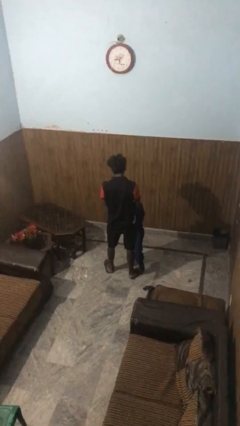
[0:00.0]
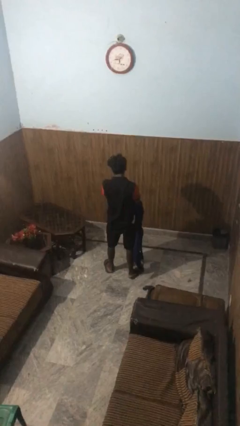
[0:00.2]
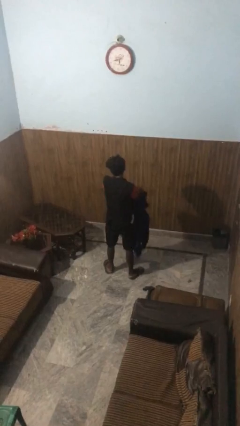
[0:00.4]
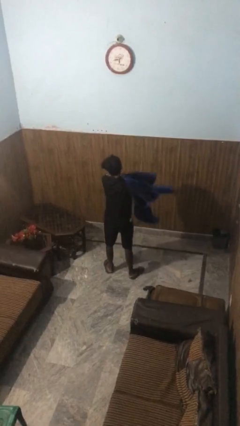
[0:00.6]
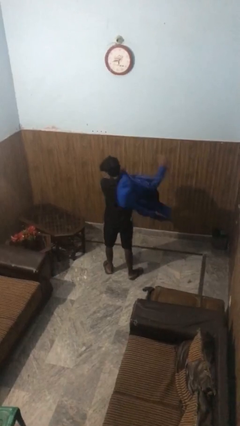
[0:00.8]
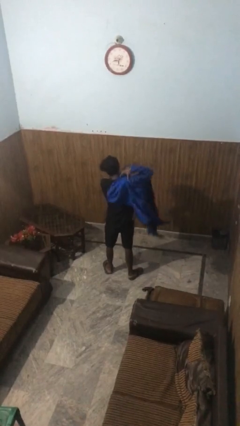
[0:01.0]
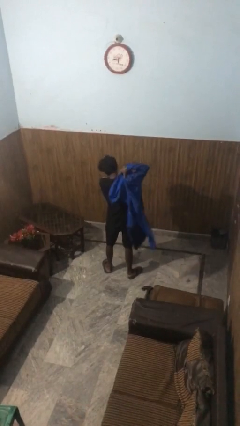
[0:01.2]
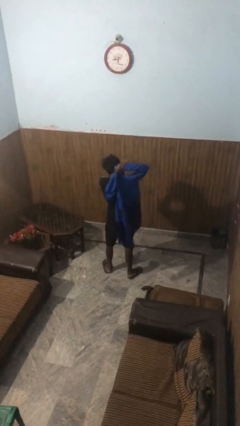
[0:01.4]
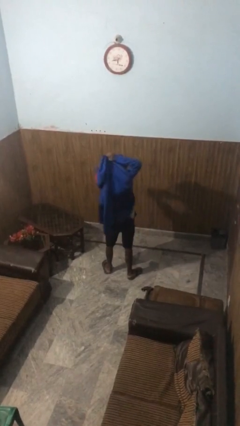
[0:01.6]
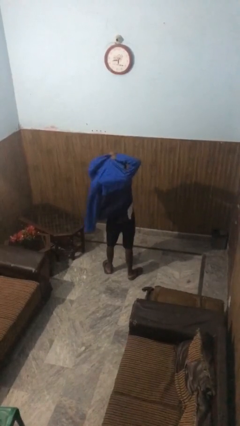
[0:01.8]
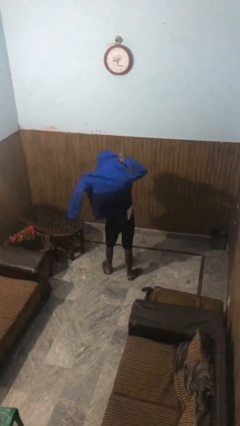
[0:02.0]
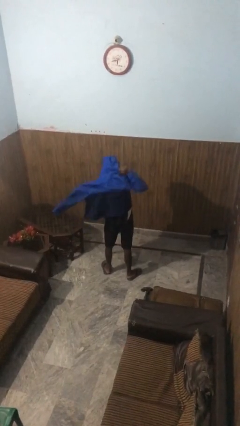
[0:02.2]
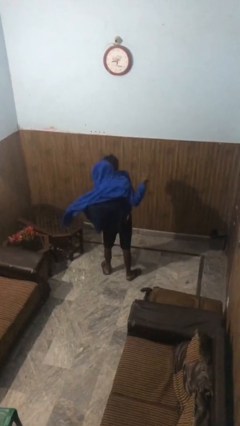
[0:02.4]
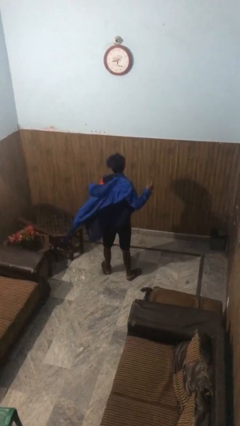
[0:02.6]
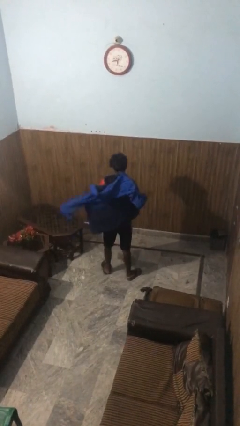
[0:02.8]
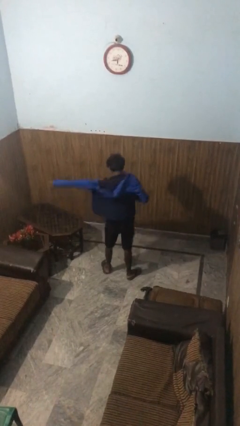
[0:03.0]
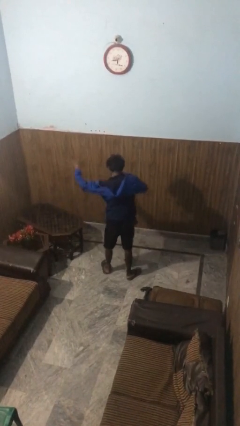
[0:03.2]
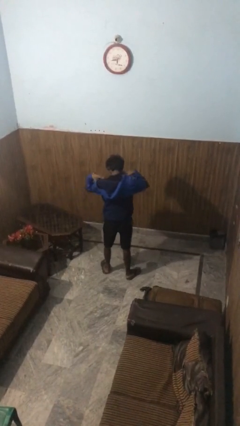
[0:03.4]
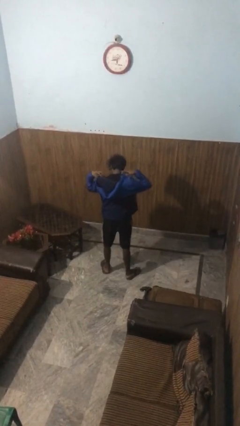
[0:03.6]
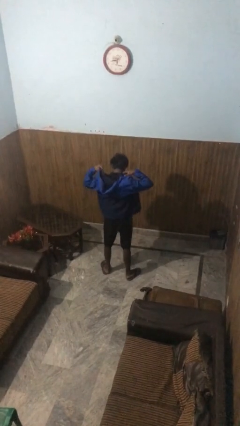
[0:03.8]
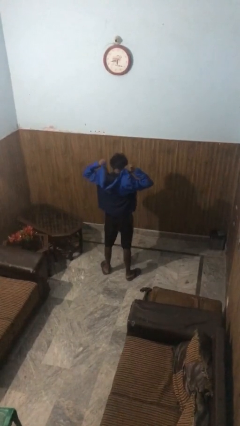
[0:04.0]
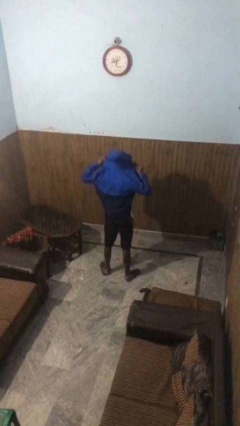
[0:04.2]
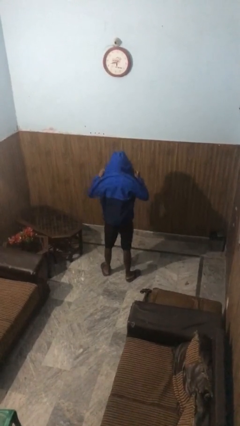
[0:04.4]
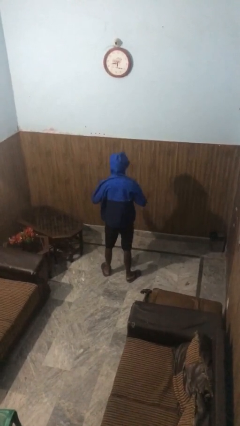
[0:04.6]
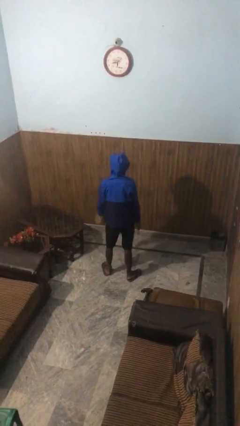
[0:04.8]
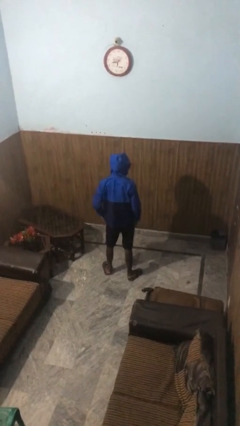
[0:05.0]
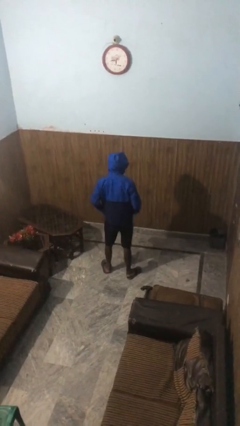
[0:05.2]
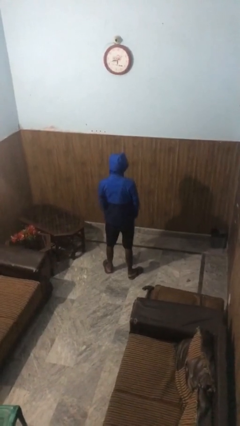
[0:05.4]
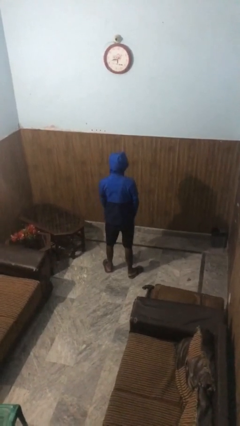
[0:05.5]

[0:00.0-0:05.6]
person puts on hoodie

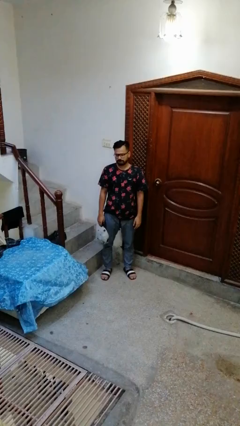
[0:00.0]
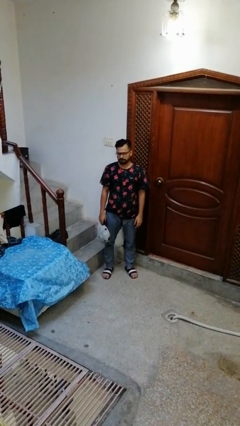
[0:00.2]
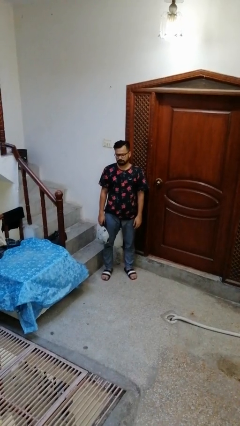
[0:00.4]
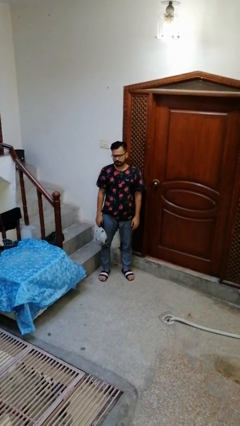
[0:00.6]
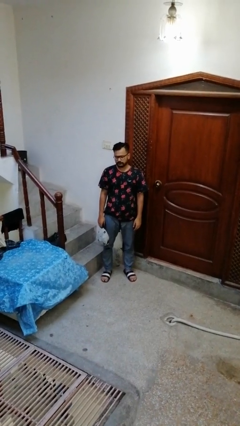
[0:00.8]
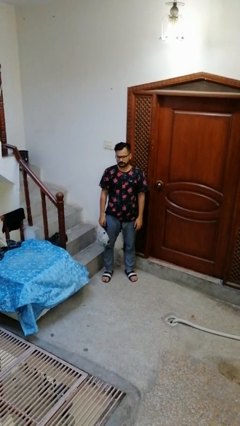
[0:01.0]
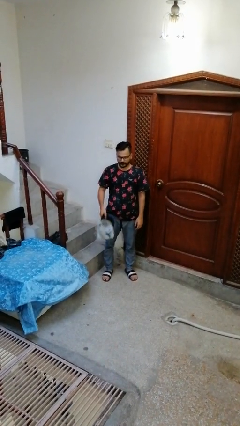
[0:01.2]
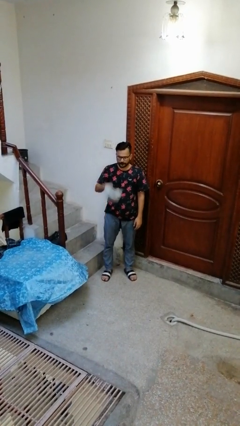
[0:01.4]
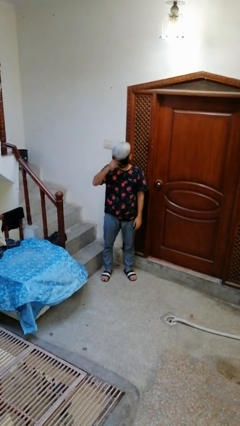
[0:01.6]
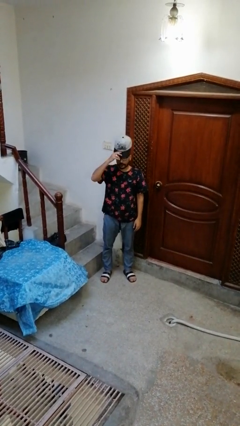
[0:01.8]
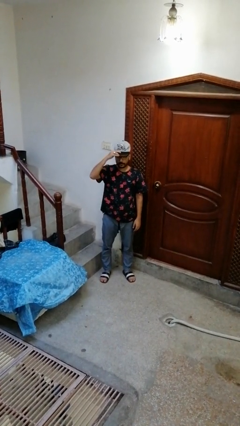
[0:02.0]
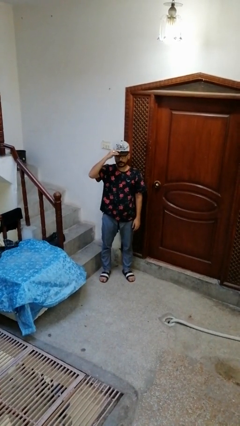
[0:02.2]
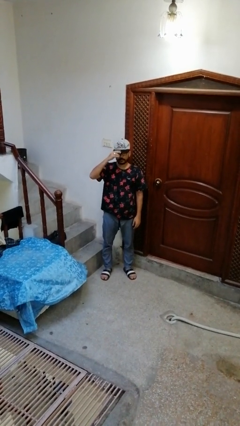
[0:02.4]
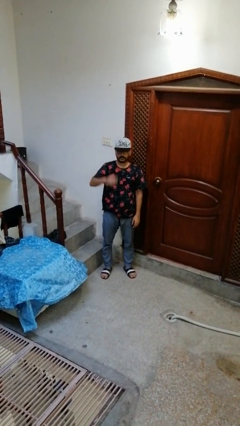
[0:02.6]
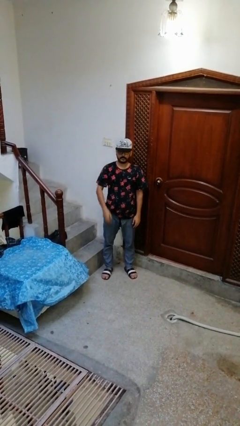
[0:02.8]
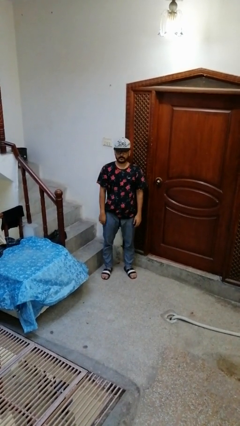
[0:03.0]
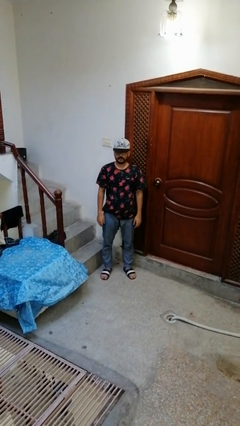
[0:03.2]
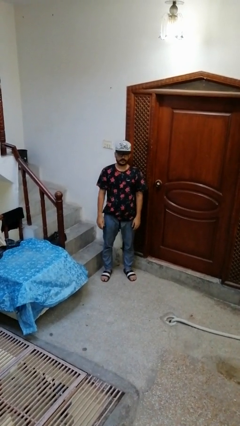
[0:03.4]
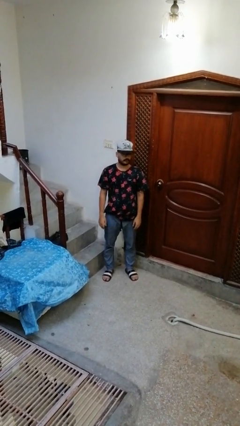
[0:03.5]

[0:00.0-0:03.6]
person puts on hat

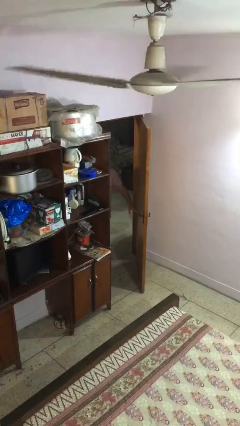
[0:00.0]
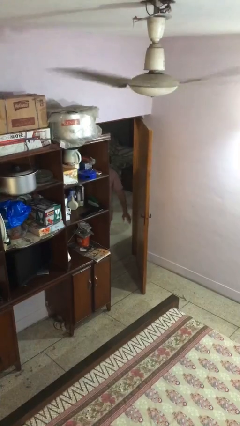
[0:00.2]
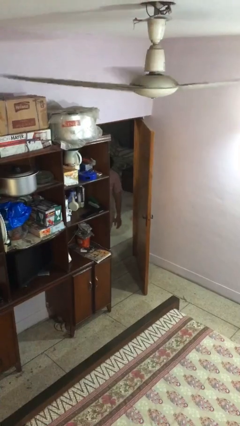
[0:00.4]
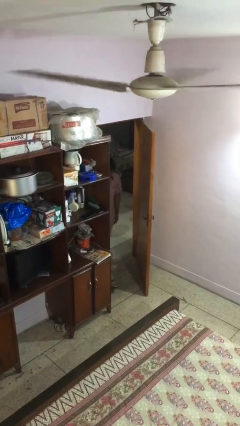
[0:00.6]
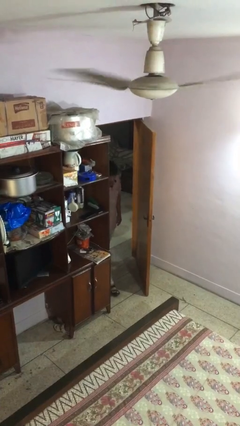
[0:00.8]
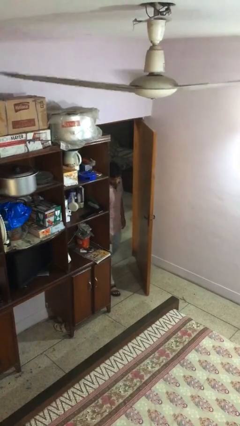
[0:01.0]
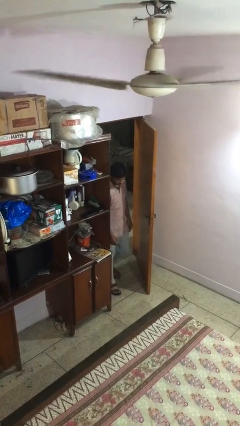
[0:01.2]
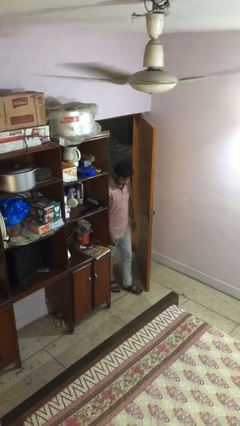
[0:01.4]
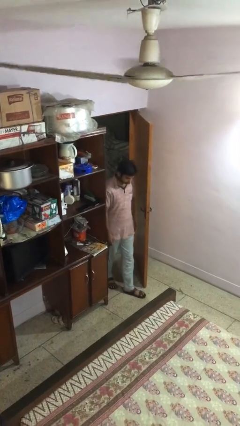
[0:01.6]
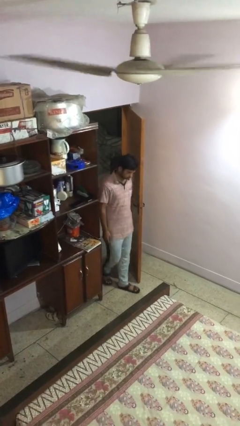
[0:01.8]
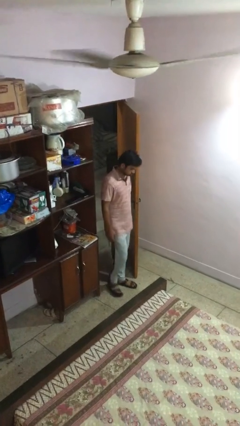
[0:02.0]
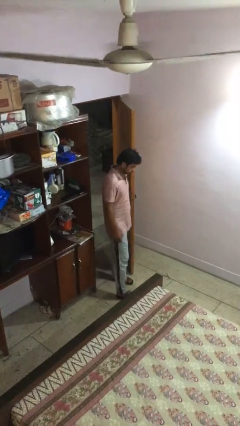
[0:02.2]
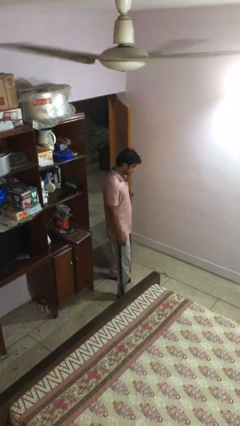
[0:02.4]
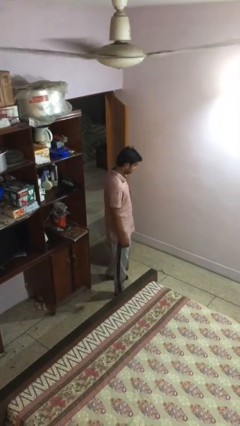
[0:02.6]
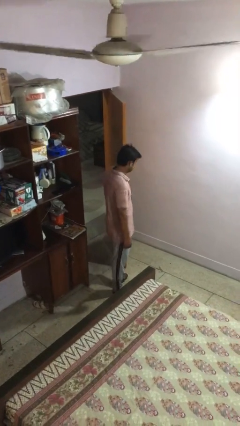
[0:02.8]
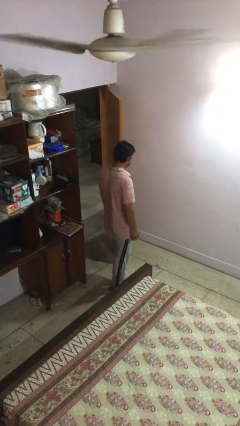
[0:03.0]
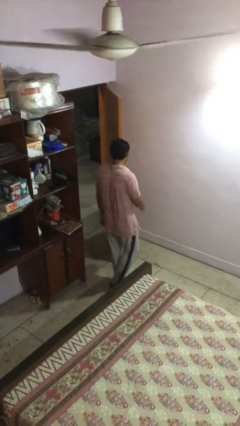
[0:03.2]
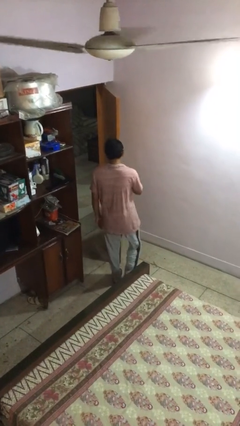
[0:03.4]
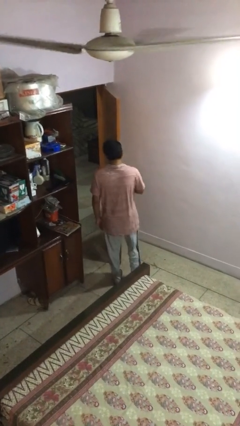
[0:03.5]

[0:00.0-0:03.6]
person enters scene through structure

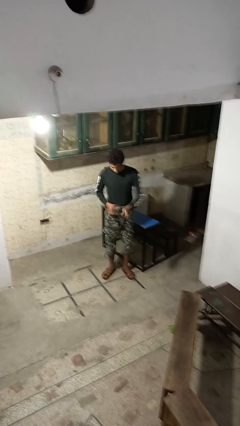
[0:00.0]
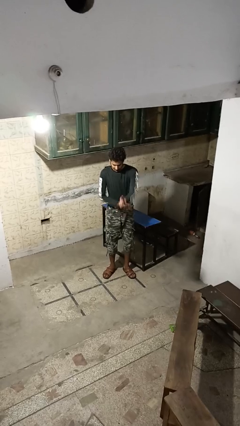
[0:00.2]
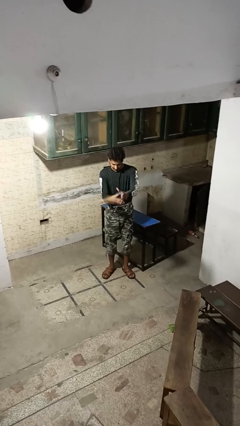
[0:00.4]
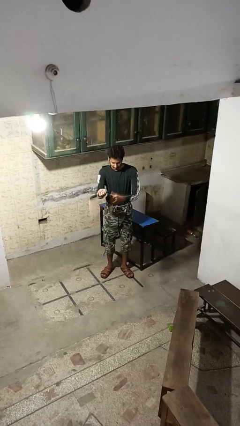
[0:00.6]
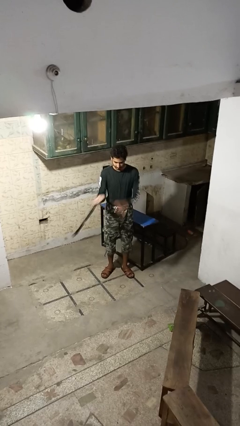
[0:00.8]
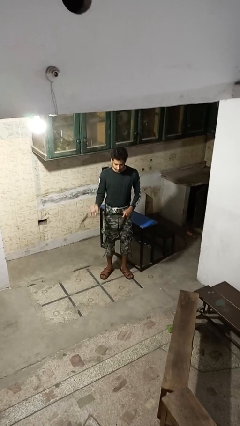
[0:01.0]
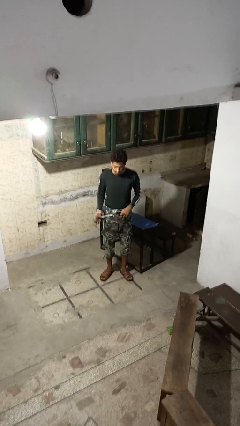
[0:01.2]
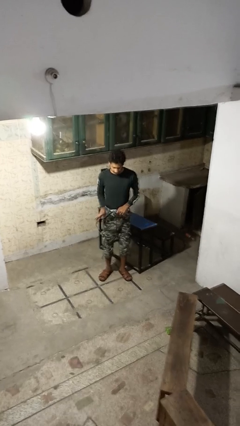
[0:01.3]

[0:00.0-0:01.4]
person takes off belt

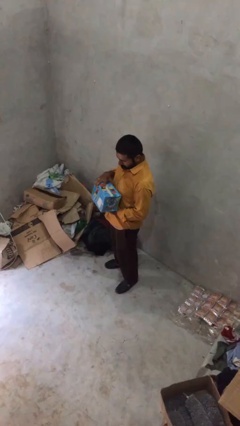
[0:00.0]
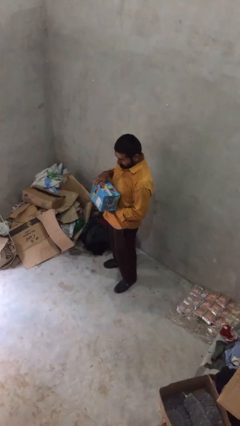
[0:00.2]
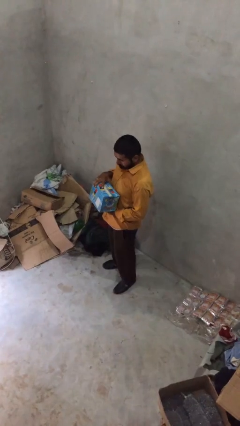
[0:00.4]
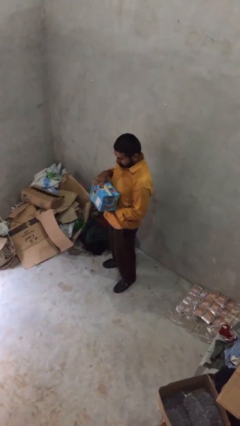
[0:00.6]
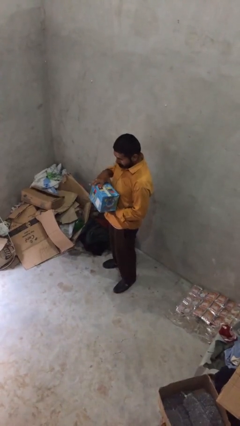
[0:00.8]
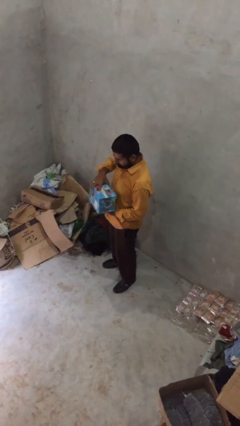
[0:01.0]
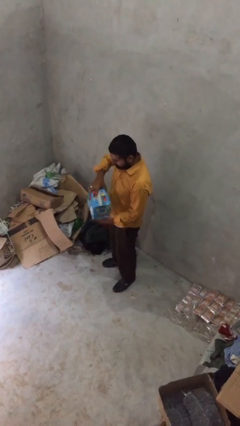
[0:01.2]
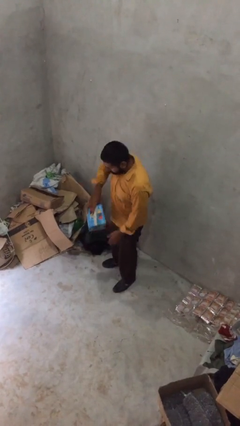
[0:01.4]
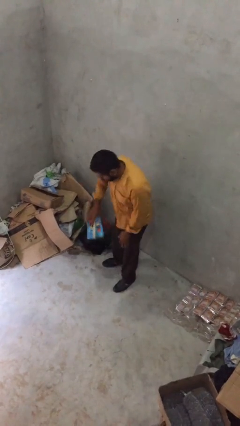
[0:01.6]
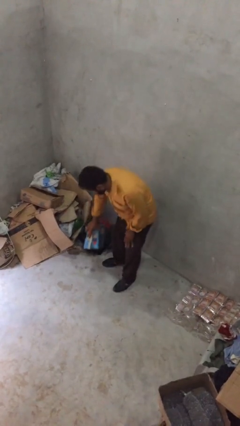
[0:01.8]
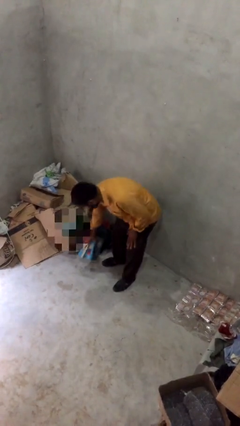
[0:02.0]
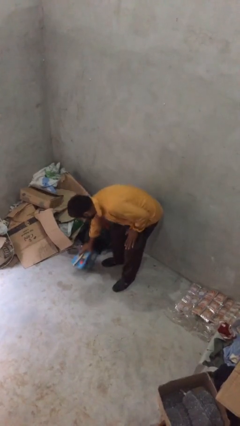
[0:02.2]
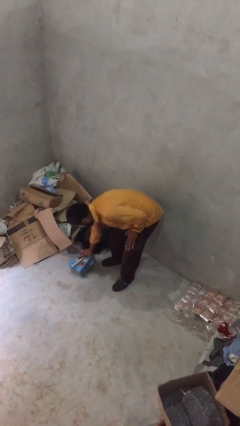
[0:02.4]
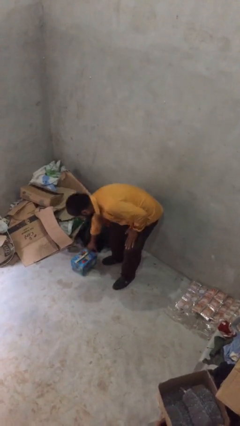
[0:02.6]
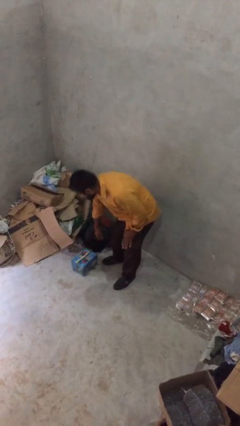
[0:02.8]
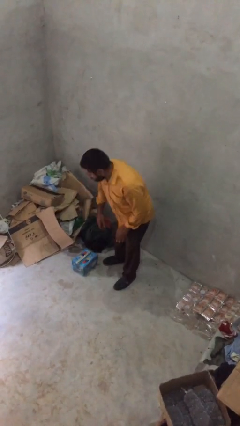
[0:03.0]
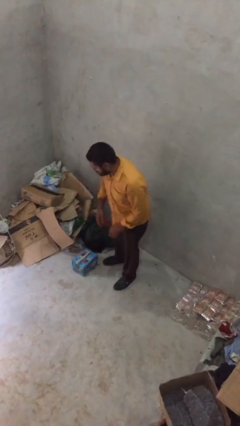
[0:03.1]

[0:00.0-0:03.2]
person puts down object on floor
